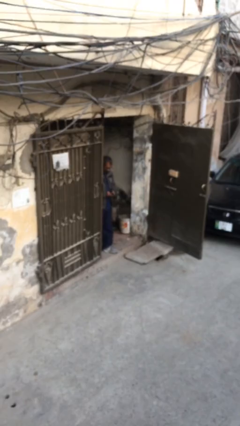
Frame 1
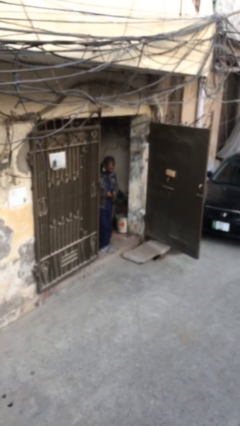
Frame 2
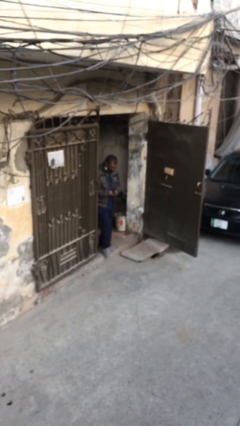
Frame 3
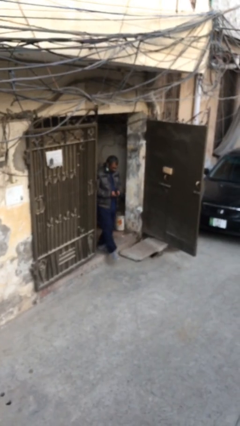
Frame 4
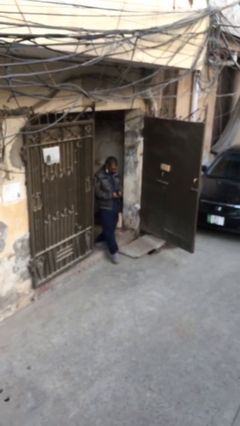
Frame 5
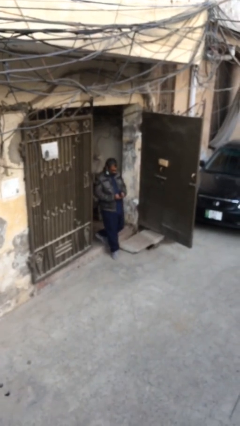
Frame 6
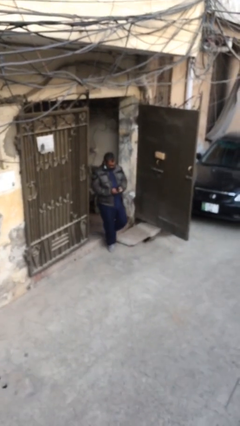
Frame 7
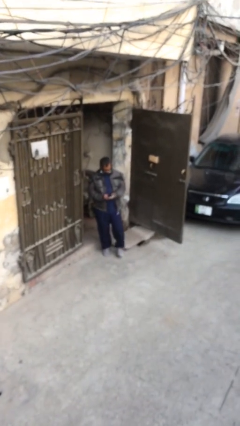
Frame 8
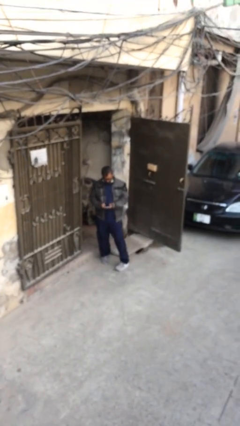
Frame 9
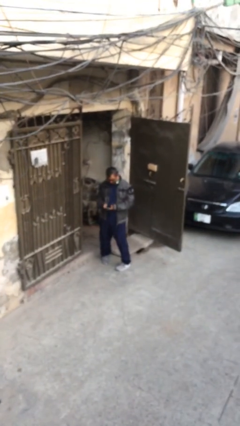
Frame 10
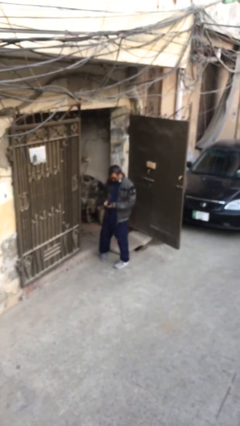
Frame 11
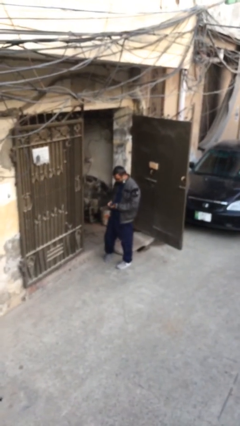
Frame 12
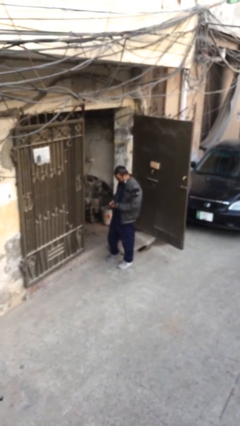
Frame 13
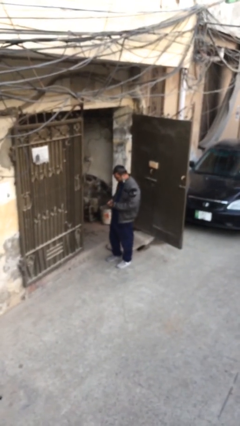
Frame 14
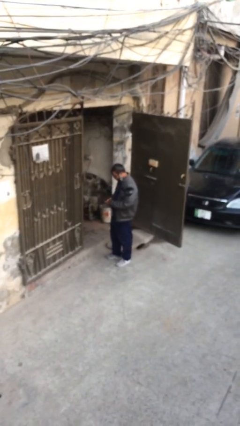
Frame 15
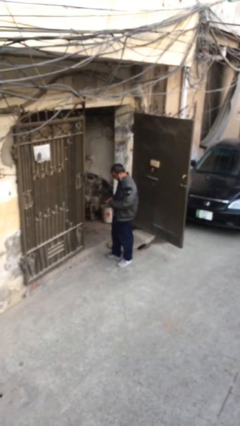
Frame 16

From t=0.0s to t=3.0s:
person enters scene through structure

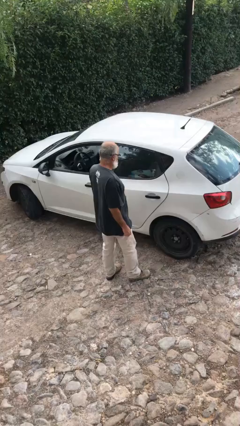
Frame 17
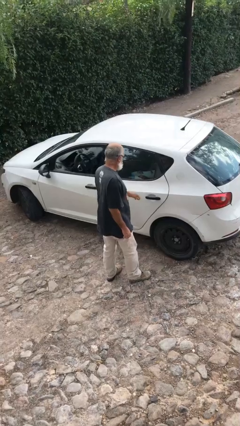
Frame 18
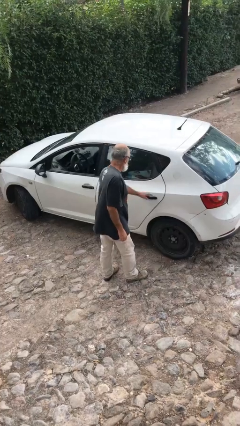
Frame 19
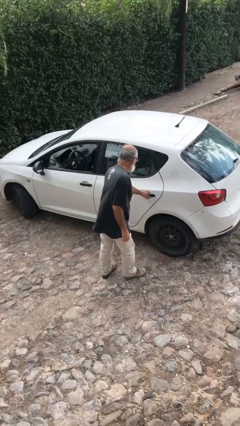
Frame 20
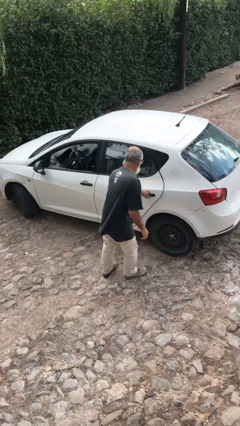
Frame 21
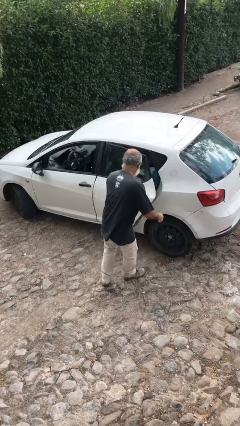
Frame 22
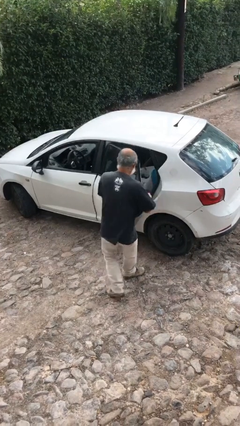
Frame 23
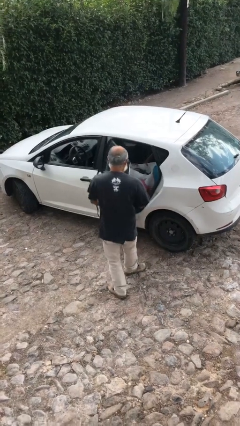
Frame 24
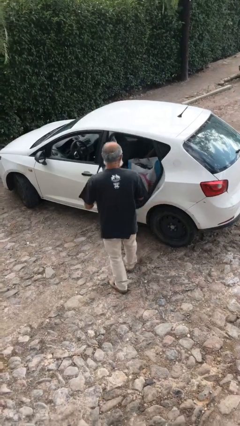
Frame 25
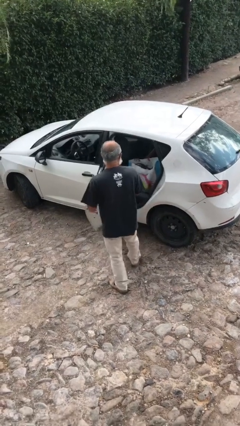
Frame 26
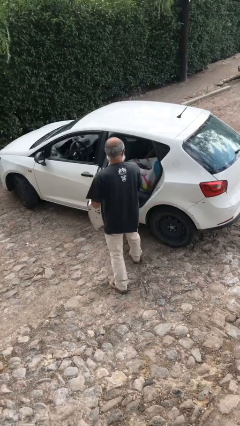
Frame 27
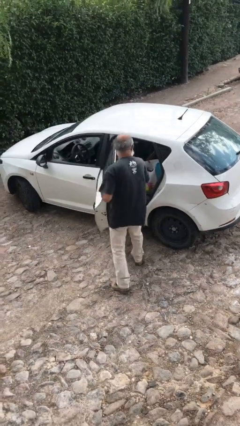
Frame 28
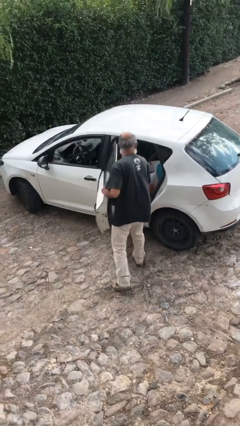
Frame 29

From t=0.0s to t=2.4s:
person opens car door

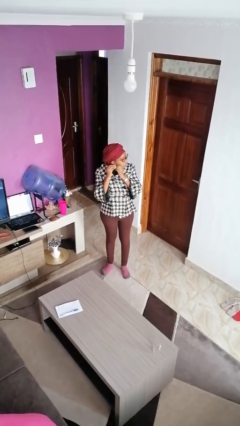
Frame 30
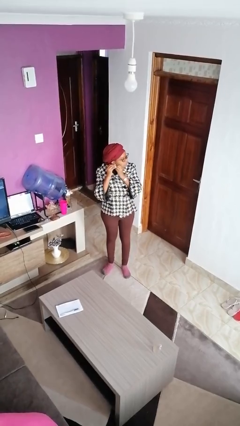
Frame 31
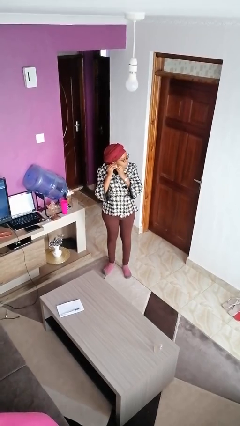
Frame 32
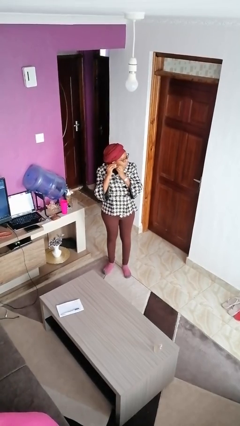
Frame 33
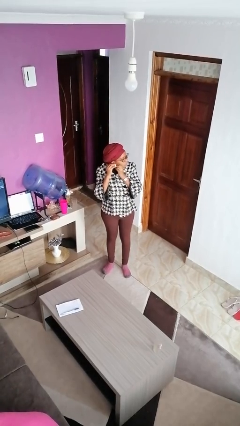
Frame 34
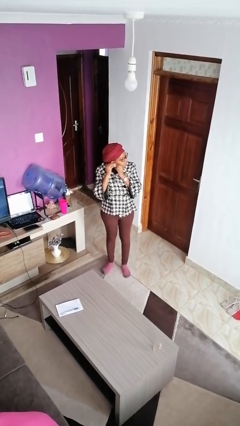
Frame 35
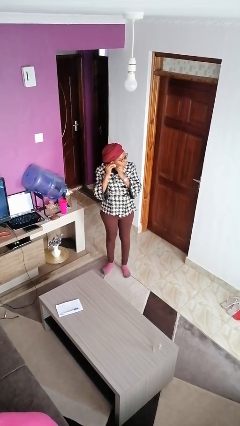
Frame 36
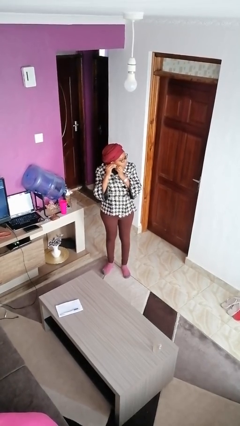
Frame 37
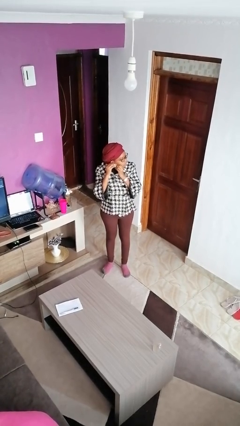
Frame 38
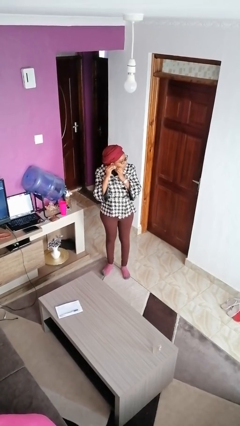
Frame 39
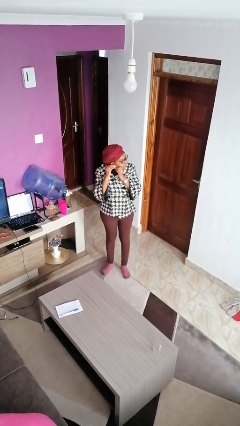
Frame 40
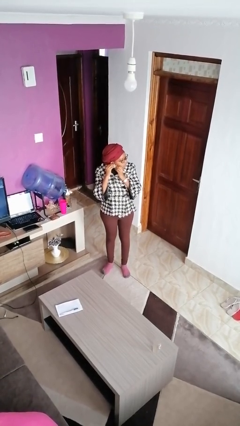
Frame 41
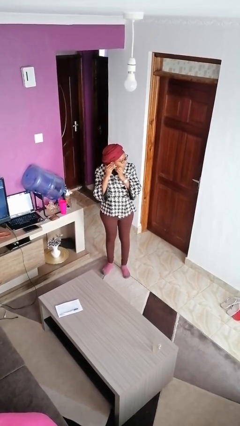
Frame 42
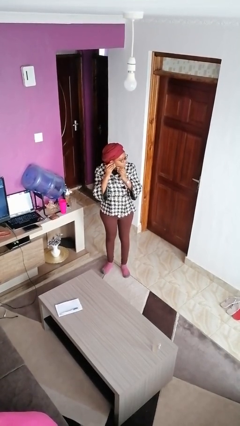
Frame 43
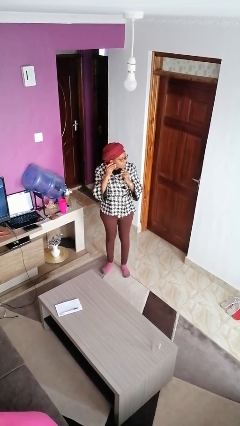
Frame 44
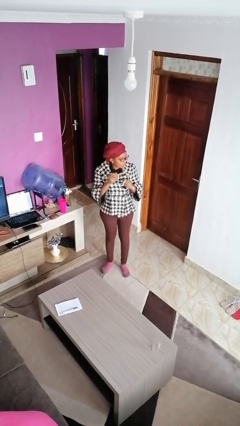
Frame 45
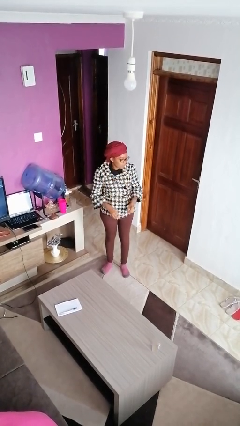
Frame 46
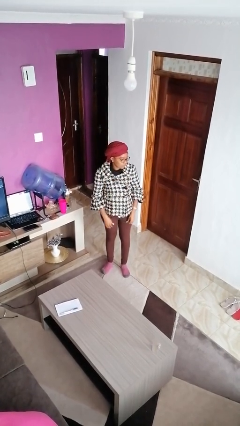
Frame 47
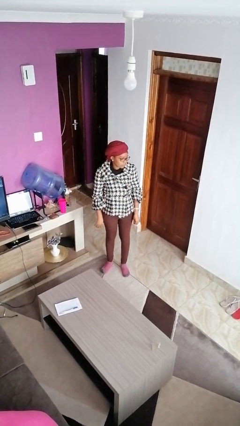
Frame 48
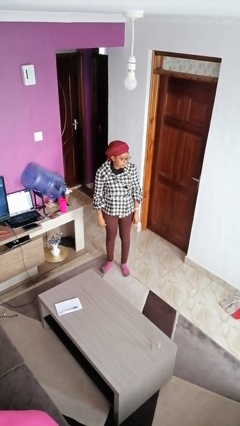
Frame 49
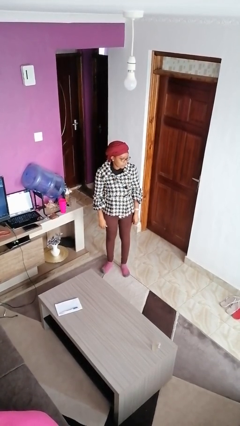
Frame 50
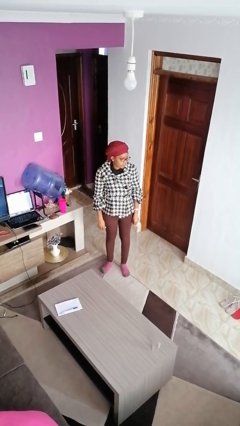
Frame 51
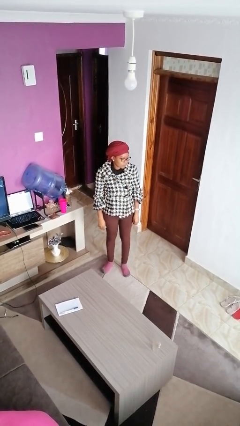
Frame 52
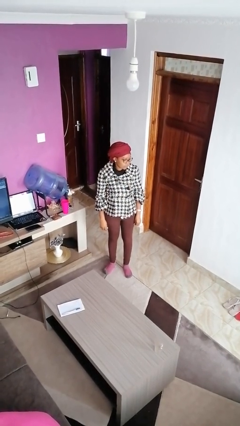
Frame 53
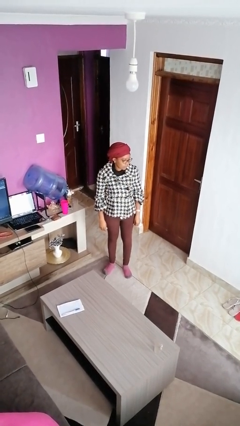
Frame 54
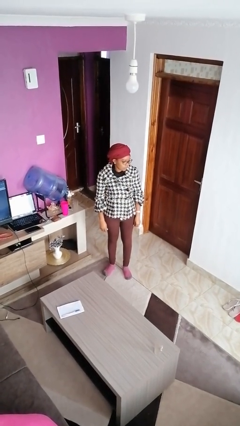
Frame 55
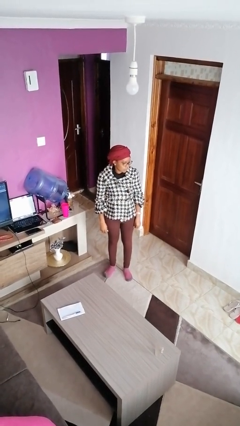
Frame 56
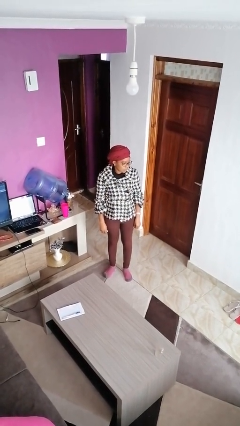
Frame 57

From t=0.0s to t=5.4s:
person puts on earrings

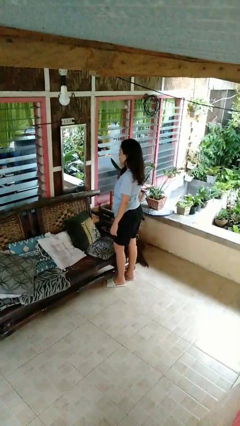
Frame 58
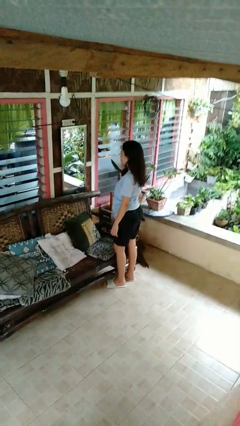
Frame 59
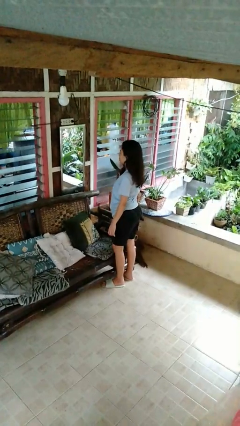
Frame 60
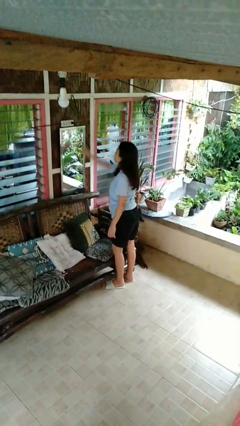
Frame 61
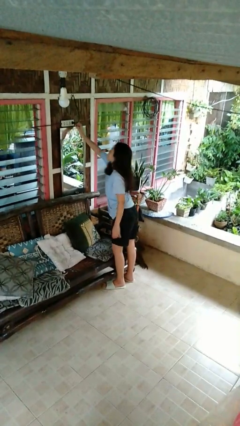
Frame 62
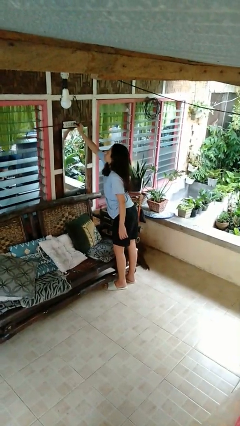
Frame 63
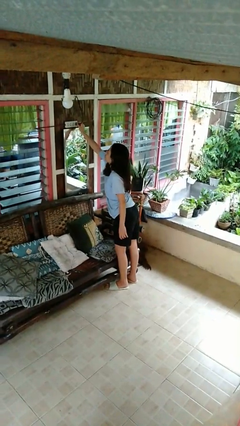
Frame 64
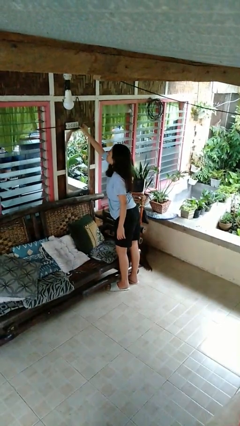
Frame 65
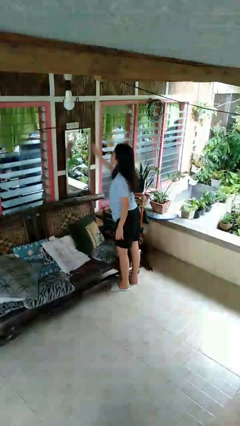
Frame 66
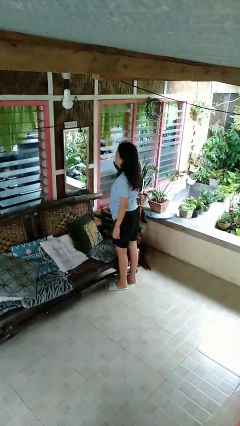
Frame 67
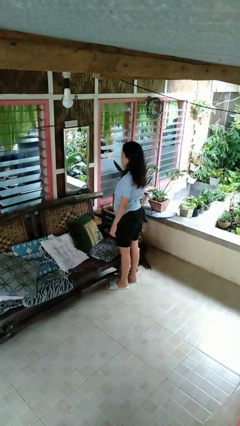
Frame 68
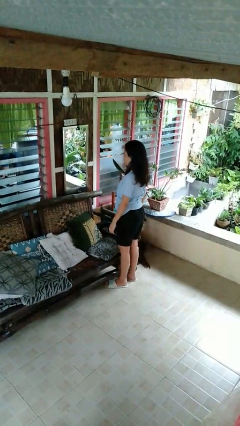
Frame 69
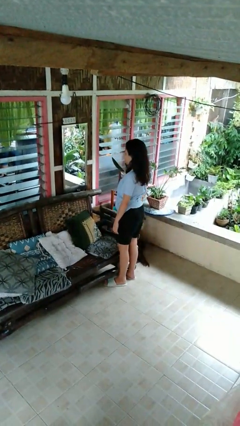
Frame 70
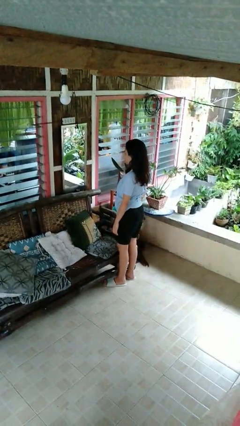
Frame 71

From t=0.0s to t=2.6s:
person unplugs from electrical socket

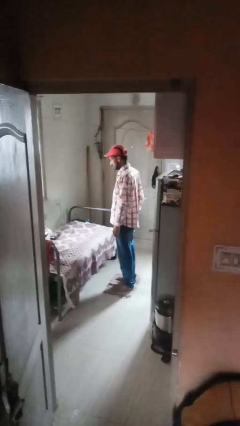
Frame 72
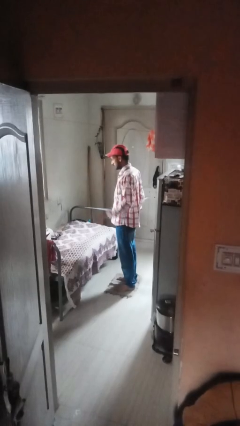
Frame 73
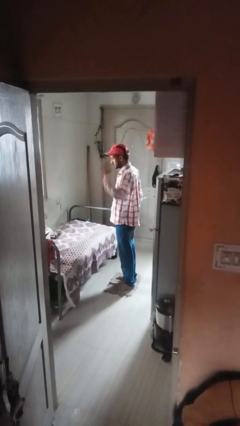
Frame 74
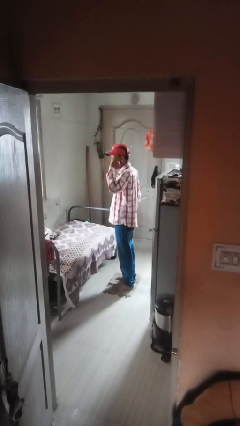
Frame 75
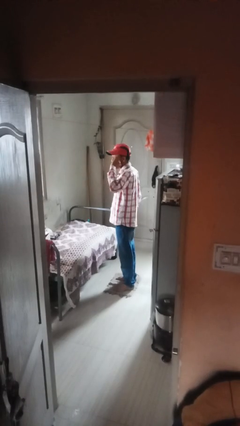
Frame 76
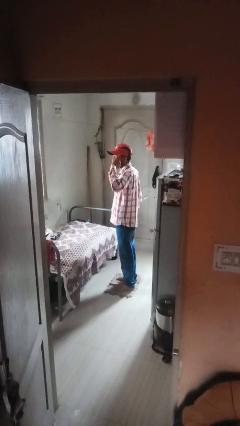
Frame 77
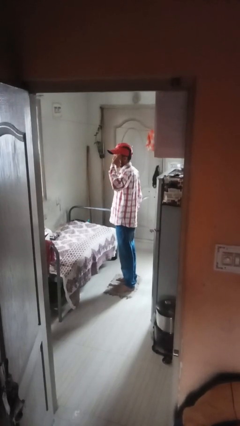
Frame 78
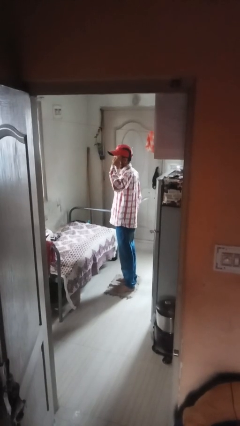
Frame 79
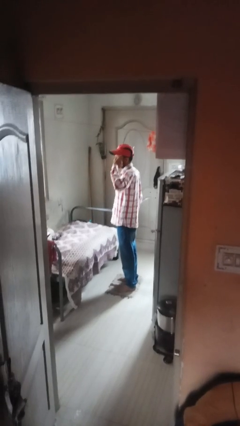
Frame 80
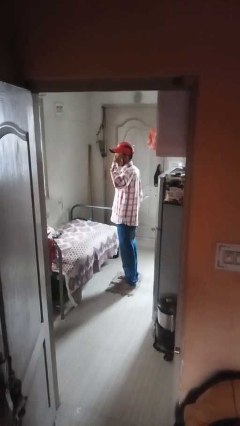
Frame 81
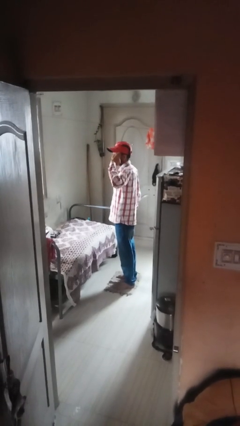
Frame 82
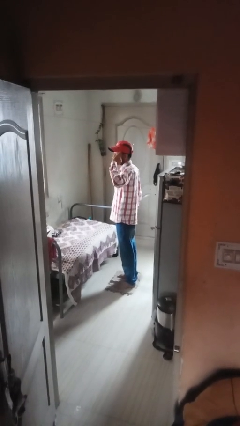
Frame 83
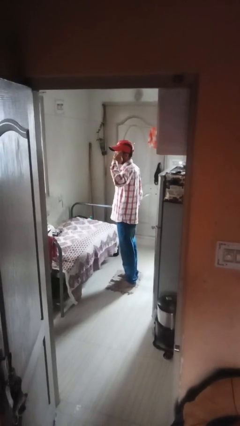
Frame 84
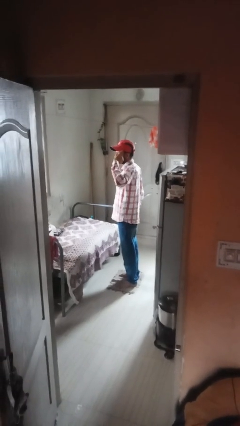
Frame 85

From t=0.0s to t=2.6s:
person salutes

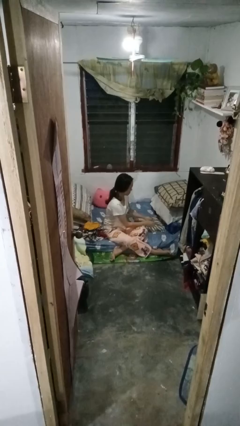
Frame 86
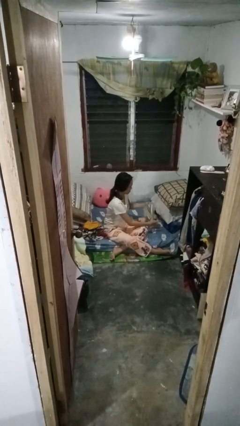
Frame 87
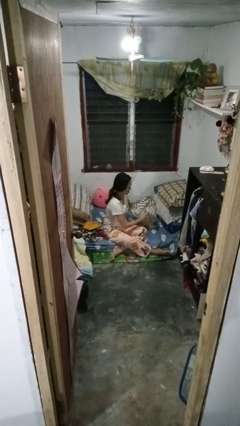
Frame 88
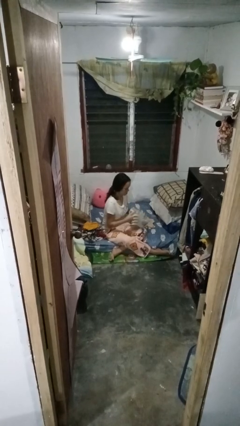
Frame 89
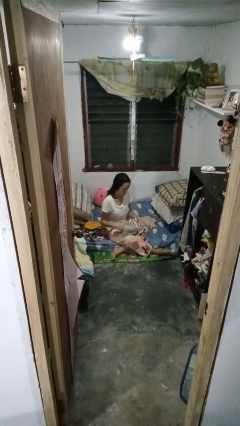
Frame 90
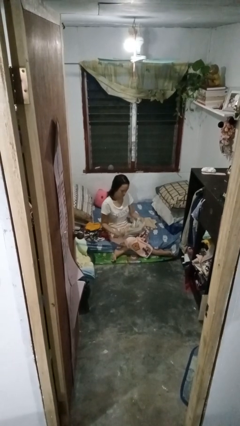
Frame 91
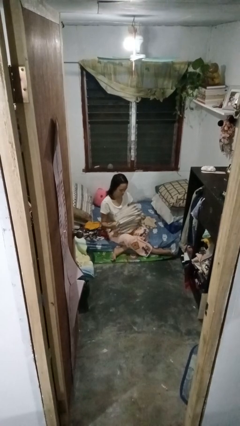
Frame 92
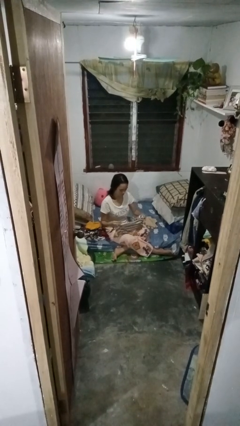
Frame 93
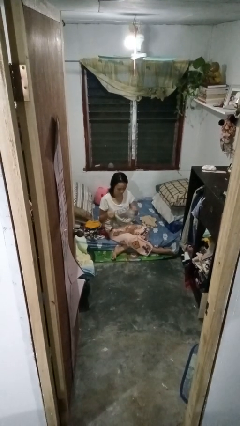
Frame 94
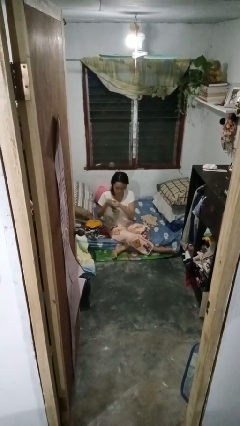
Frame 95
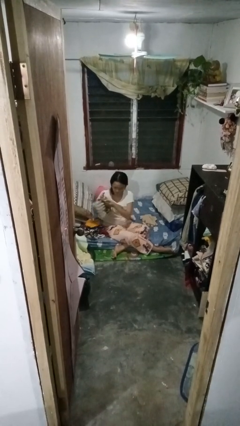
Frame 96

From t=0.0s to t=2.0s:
person folds shirt
